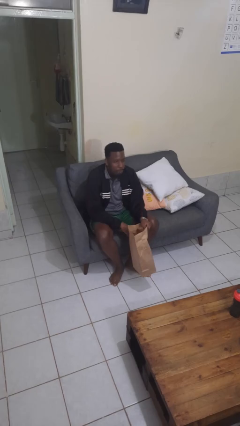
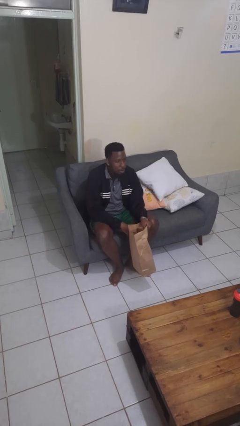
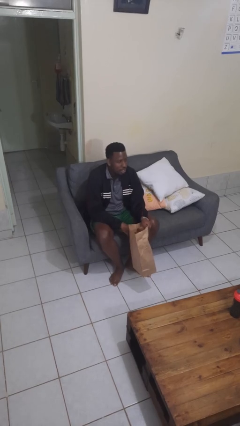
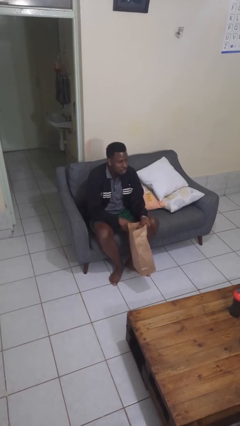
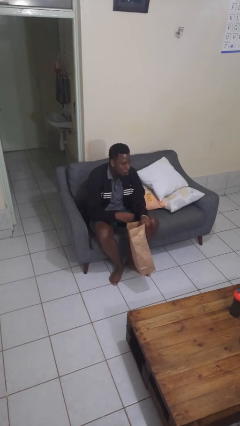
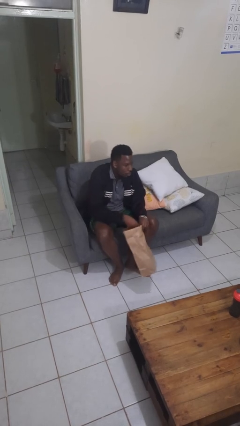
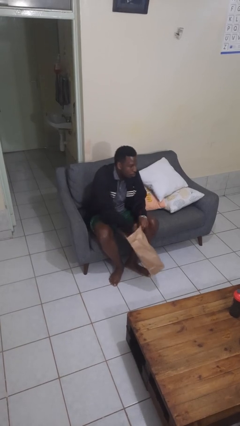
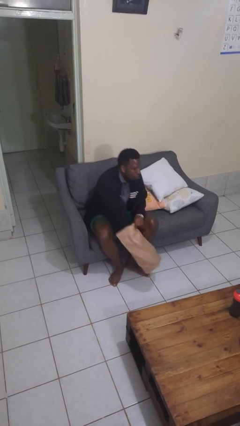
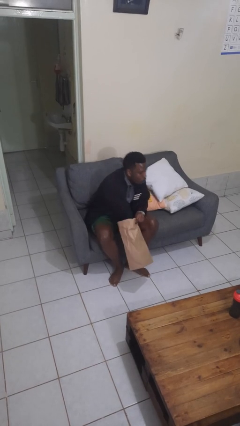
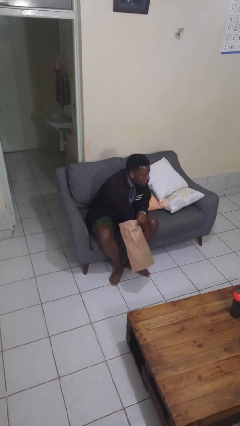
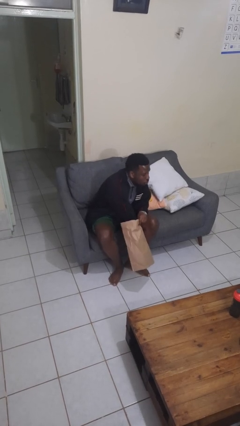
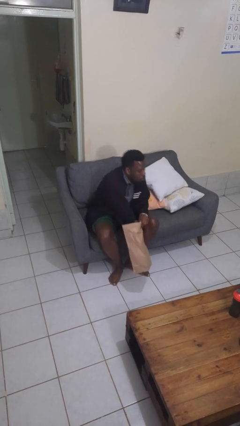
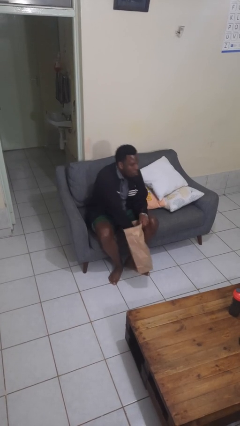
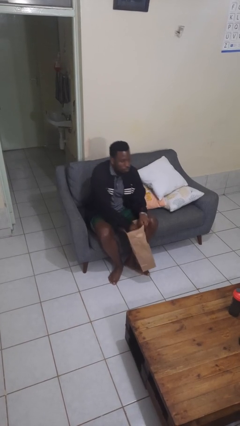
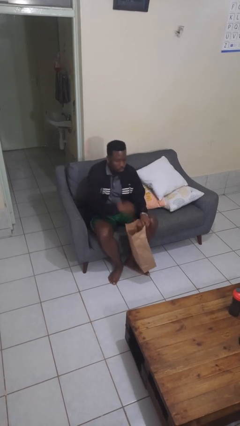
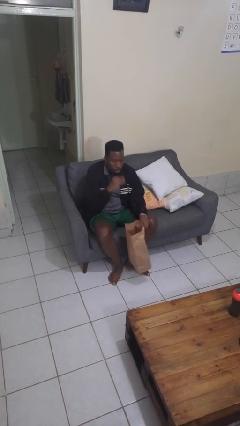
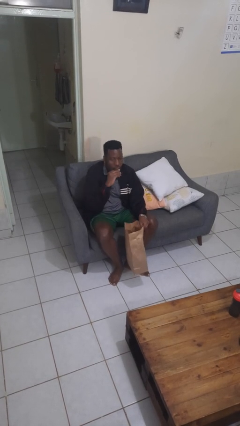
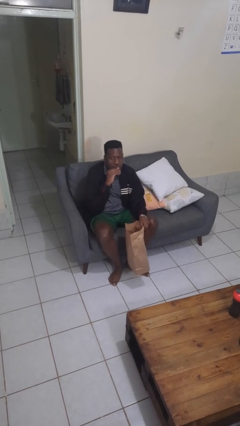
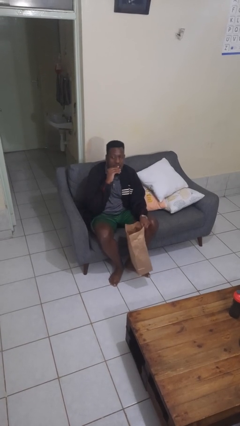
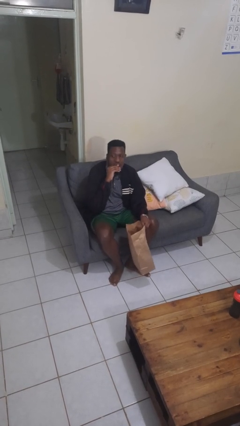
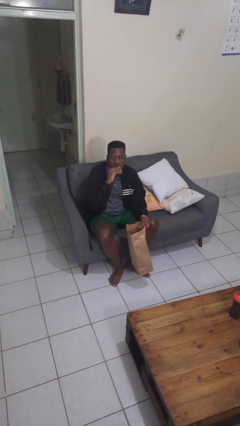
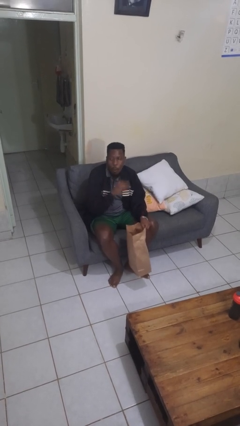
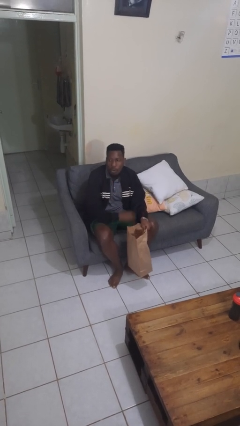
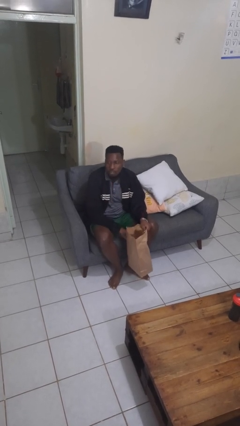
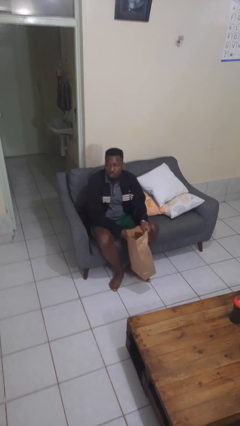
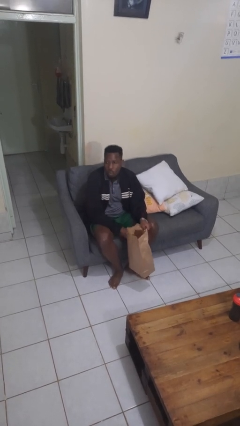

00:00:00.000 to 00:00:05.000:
person eats snack from bag

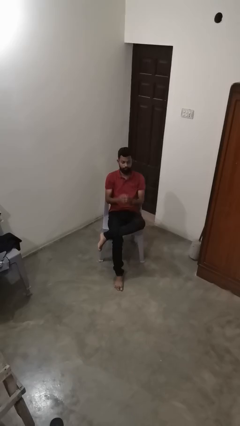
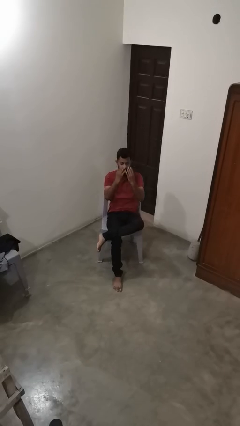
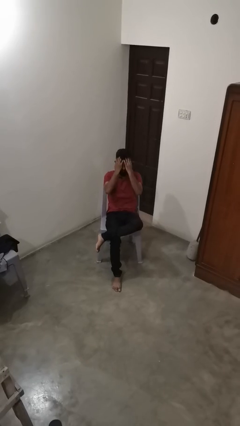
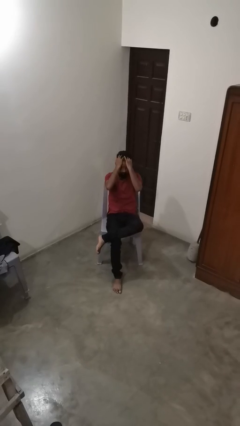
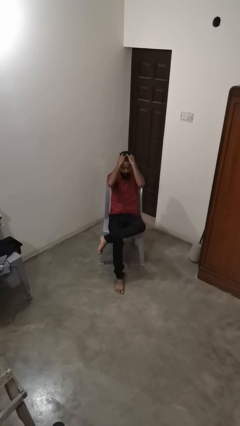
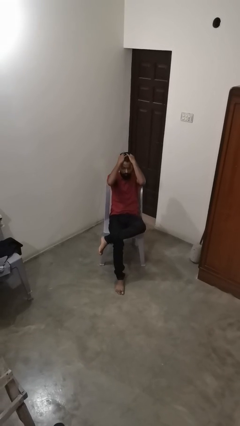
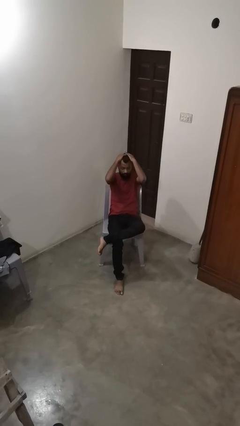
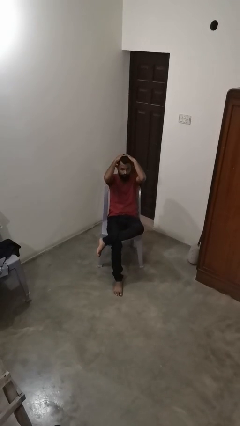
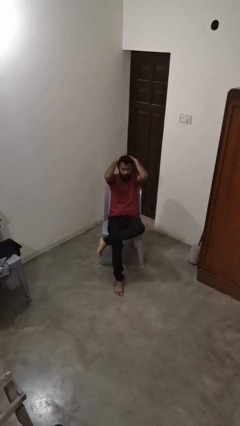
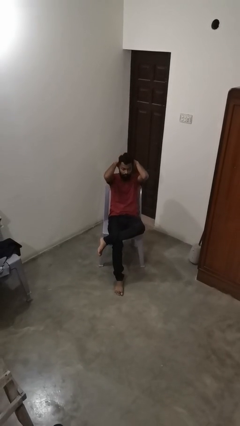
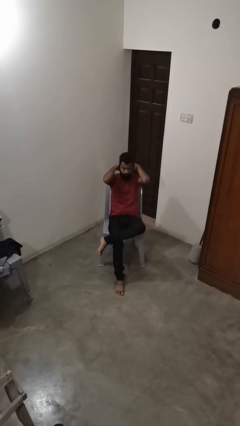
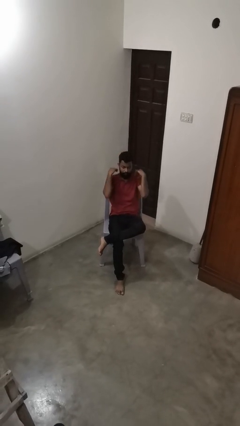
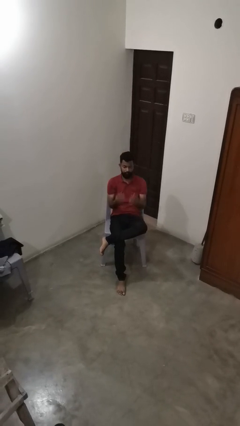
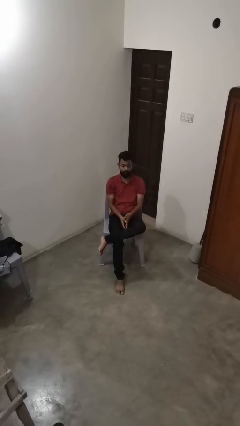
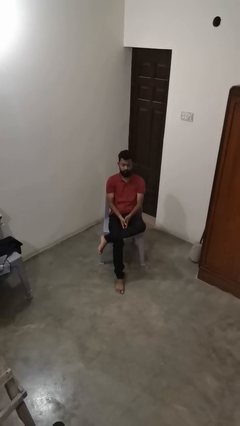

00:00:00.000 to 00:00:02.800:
person strokes hair

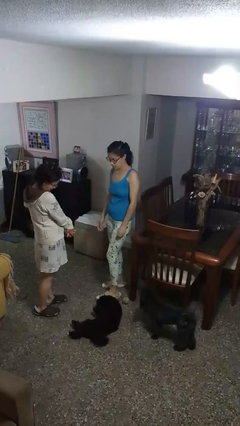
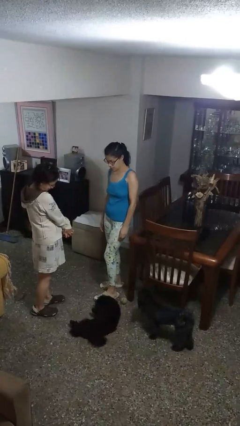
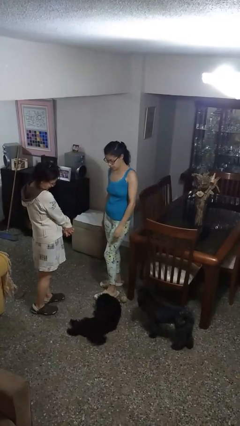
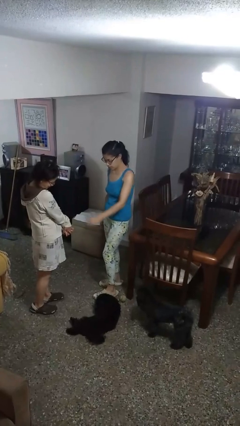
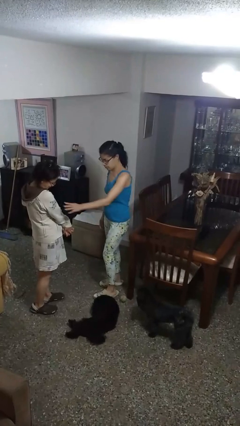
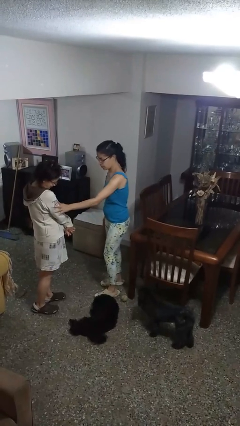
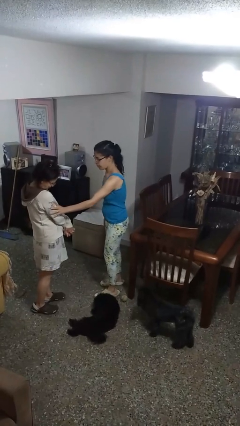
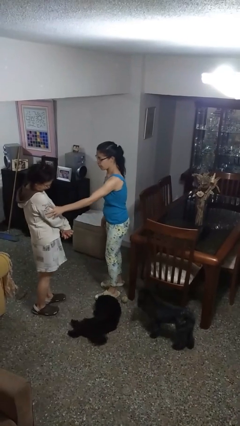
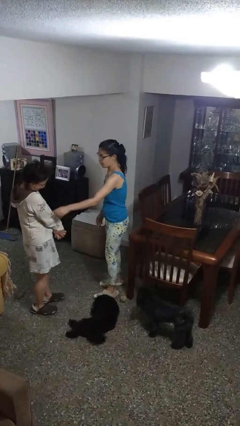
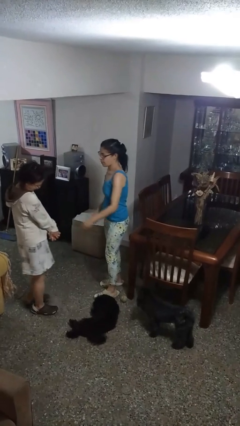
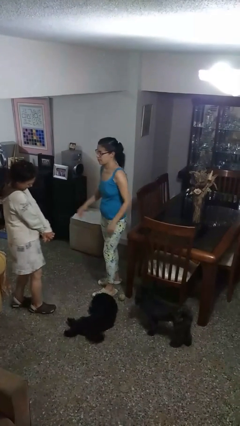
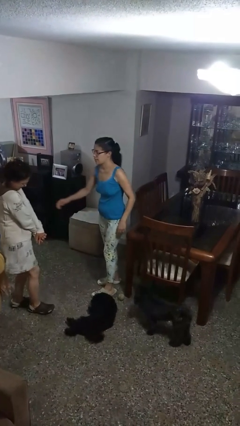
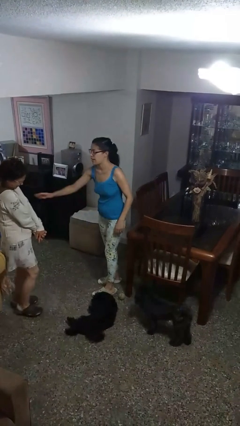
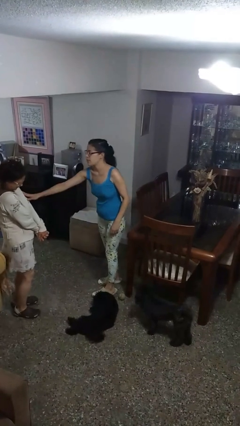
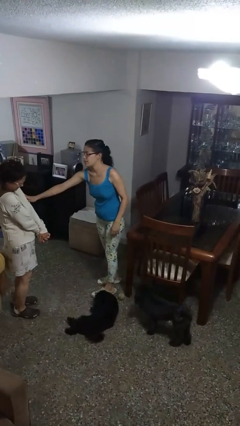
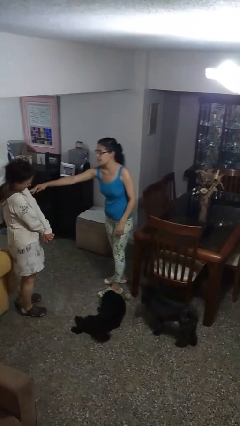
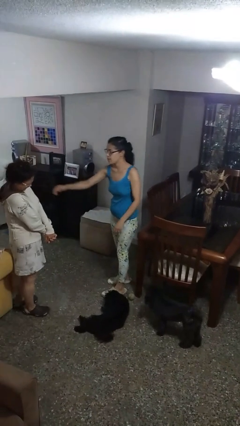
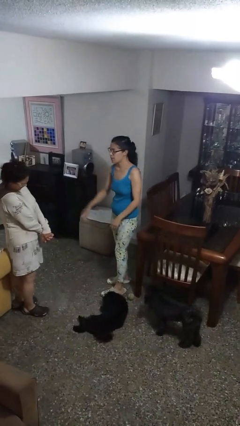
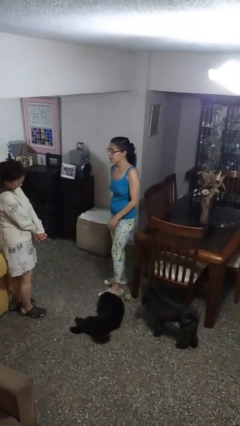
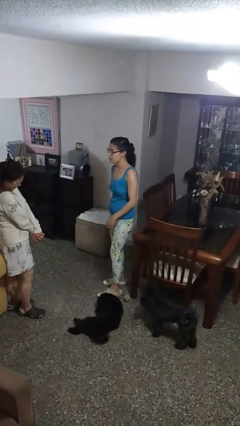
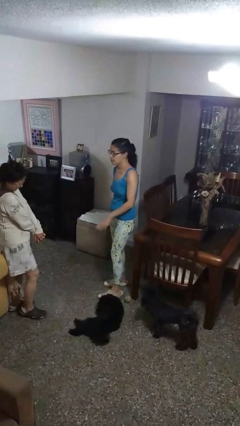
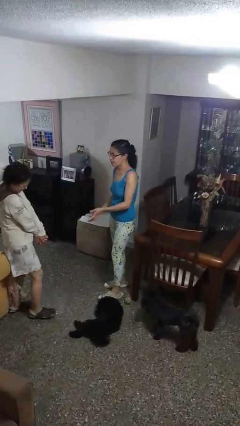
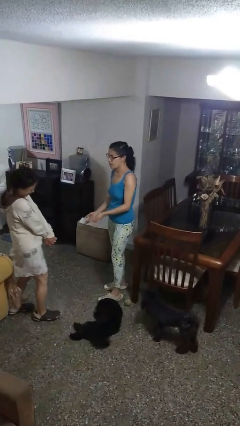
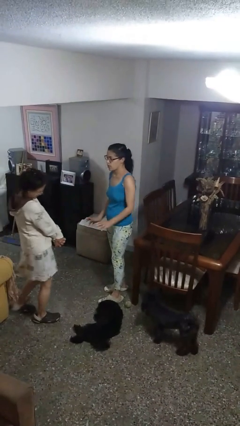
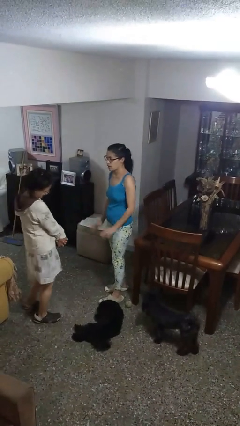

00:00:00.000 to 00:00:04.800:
person shoves person

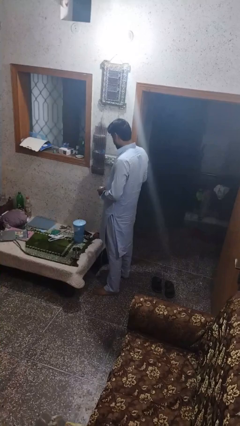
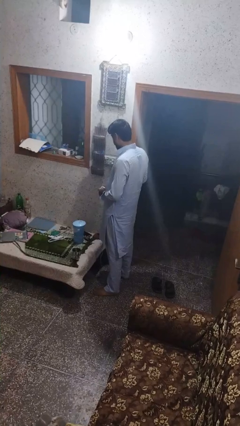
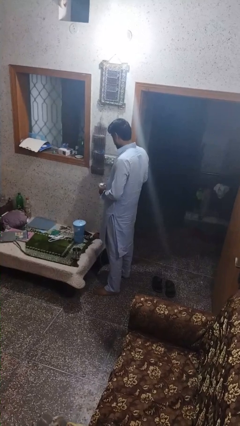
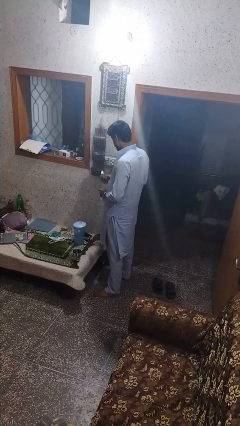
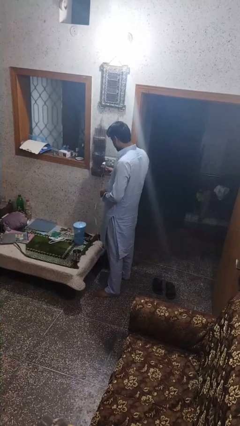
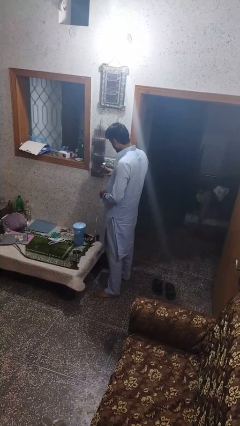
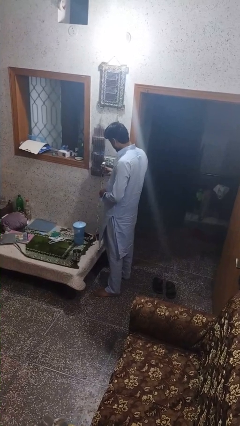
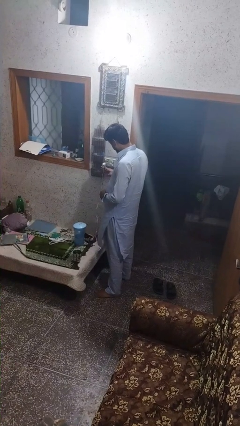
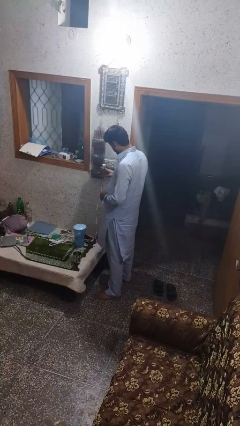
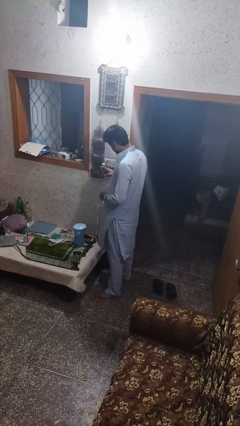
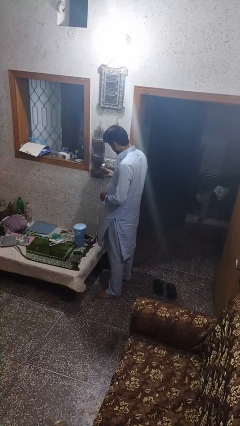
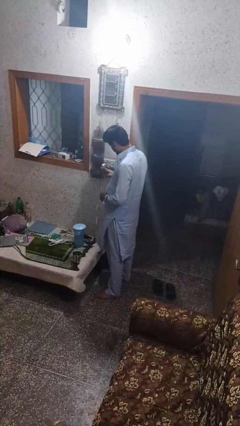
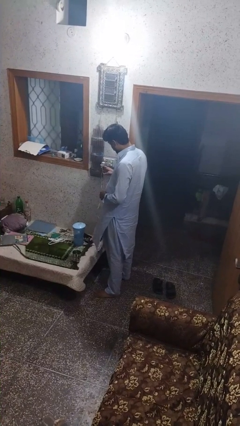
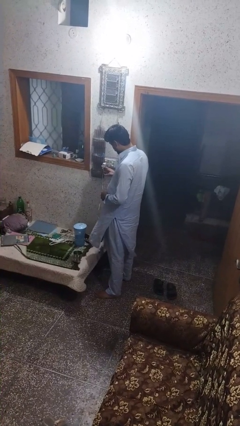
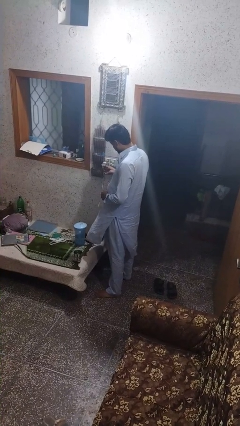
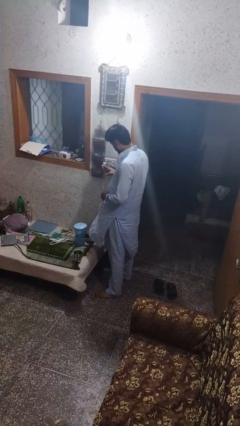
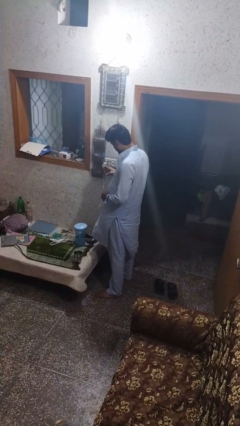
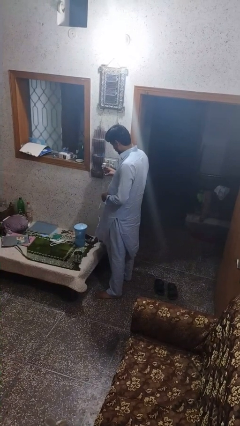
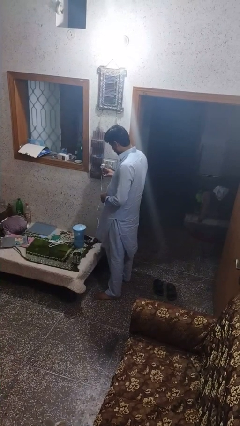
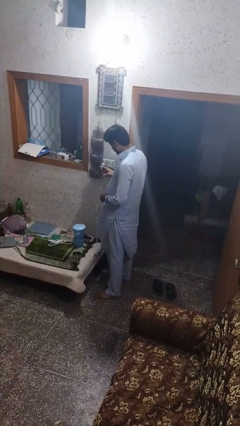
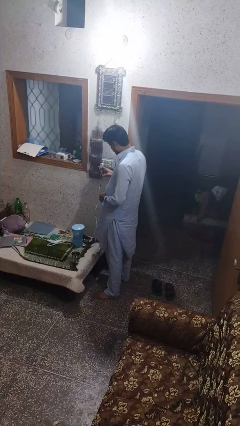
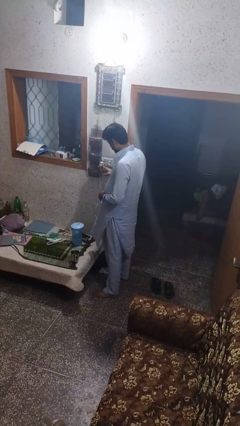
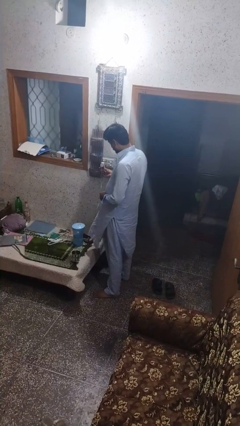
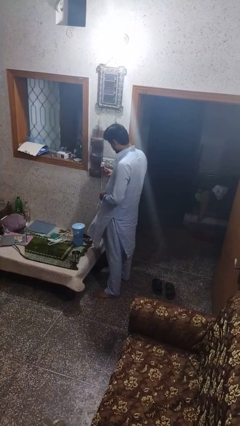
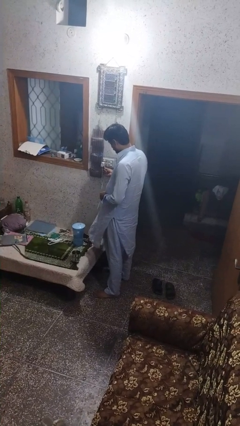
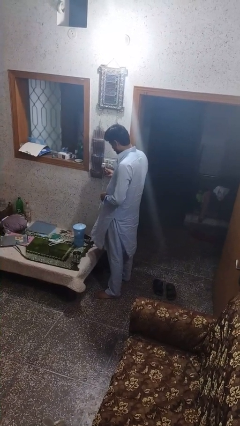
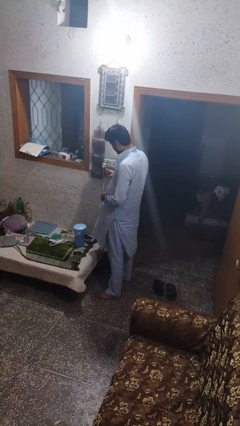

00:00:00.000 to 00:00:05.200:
person plugs into electrical socket
